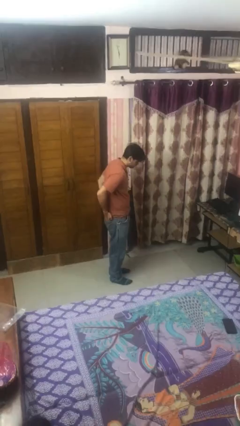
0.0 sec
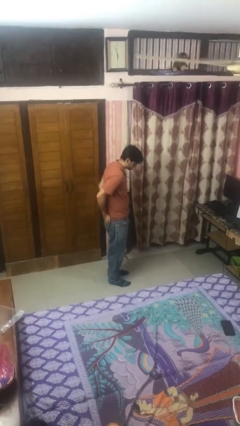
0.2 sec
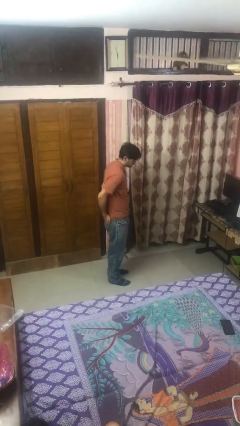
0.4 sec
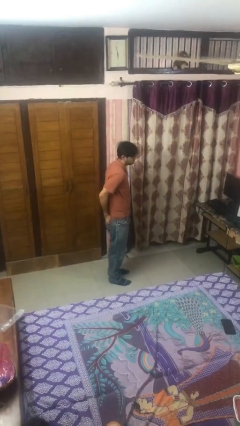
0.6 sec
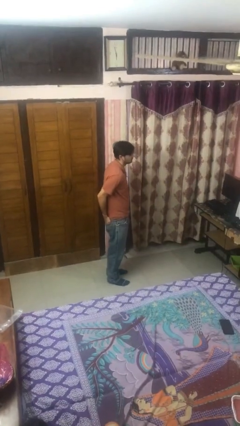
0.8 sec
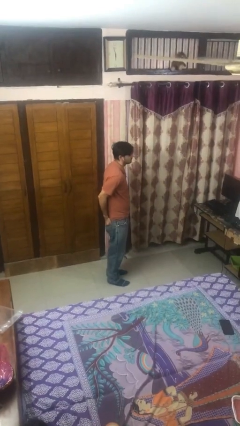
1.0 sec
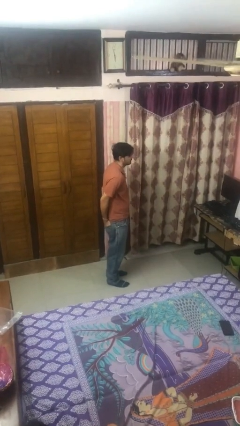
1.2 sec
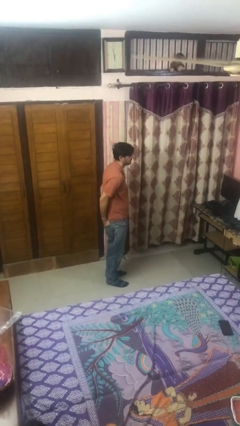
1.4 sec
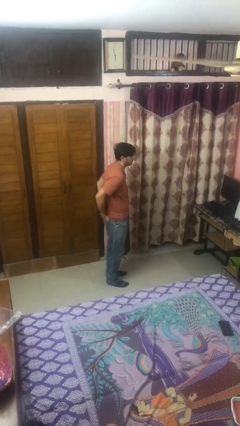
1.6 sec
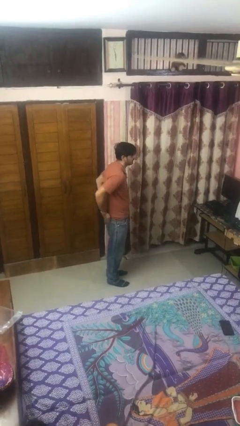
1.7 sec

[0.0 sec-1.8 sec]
person puts hands in back pockets

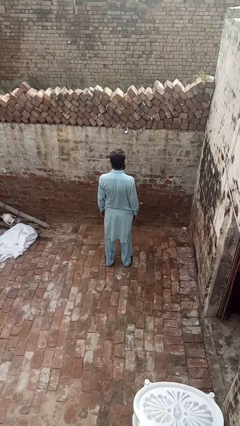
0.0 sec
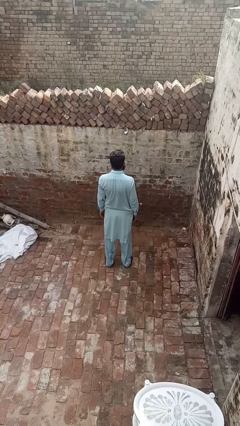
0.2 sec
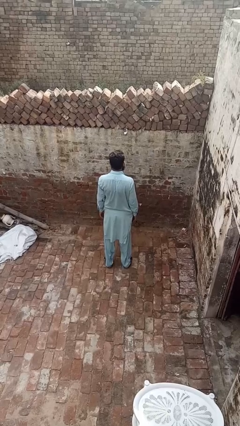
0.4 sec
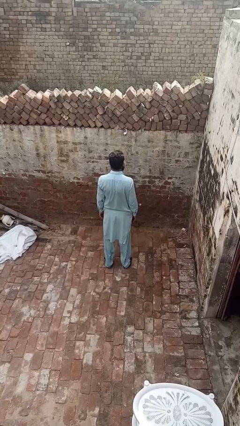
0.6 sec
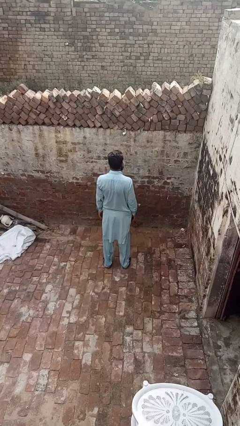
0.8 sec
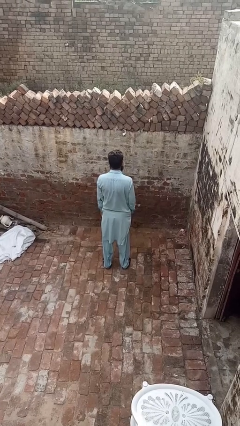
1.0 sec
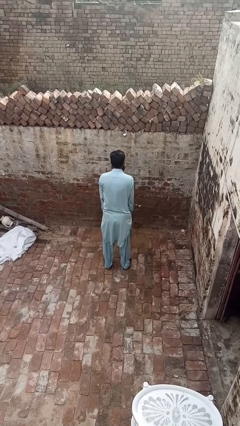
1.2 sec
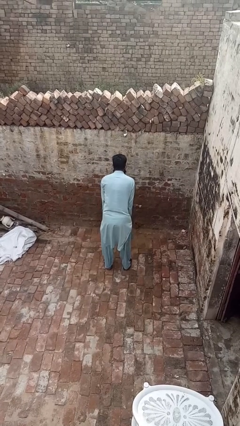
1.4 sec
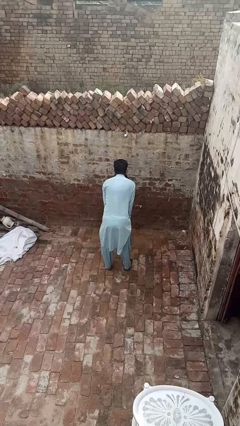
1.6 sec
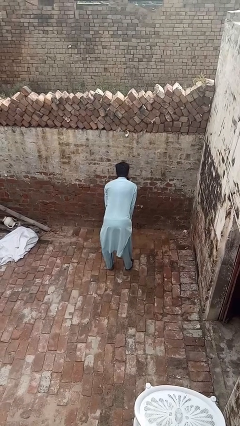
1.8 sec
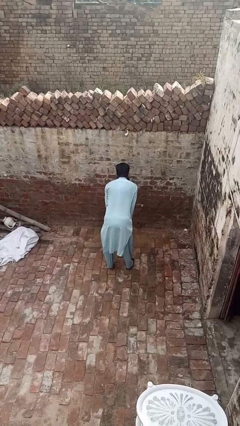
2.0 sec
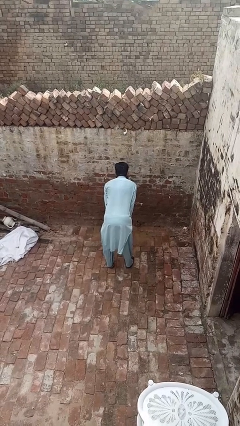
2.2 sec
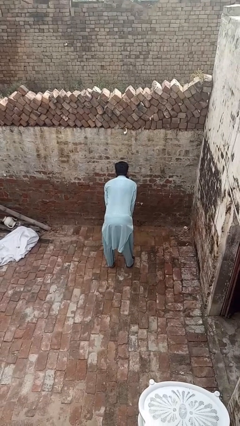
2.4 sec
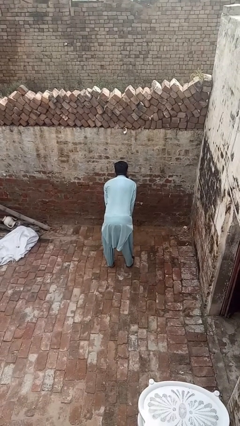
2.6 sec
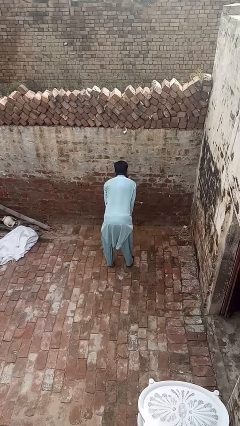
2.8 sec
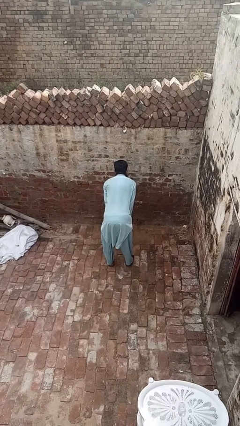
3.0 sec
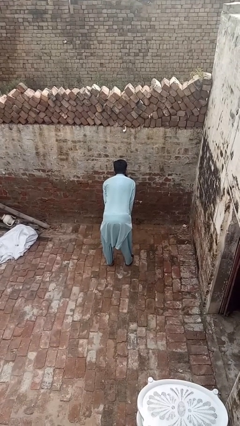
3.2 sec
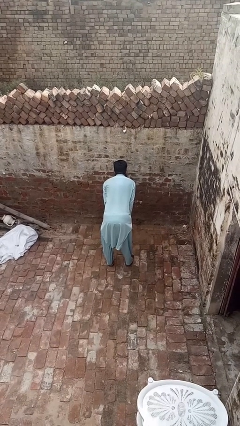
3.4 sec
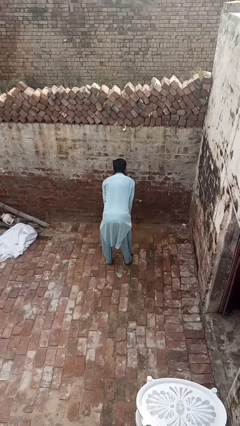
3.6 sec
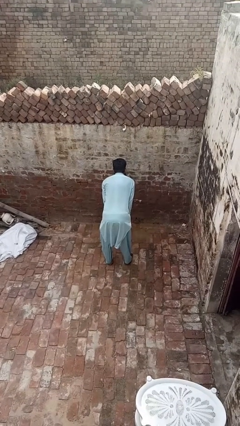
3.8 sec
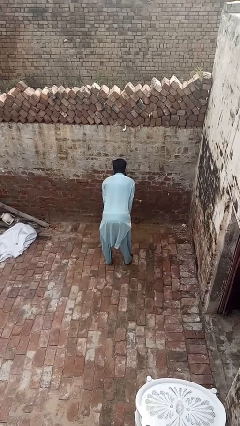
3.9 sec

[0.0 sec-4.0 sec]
person slaps hands on thighs

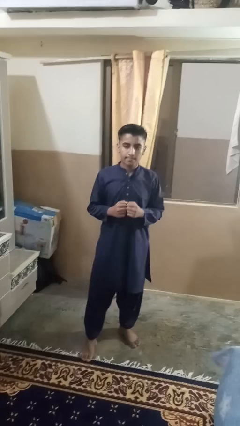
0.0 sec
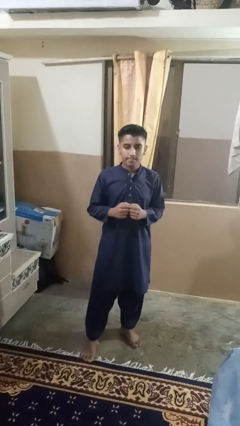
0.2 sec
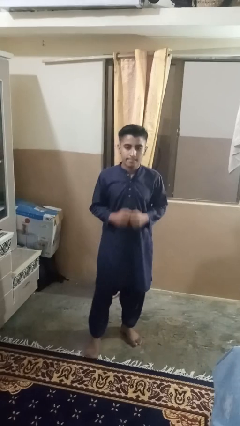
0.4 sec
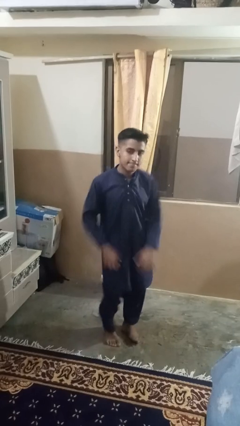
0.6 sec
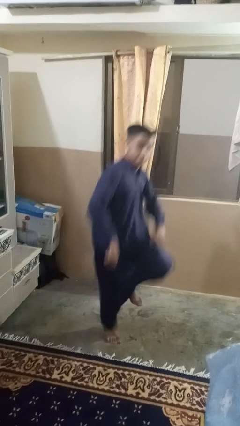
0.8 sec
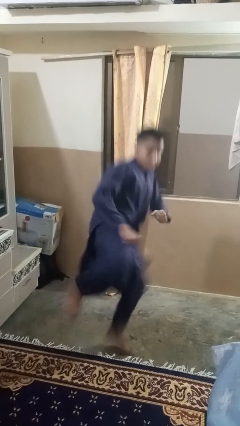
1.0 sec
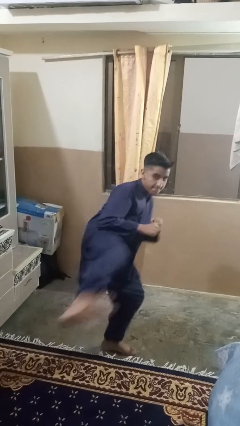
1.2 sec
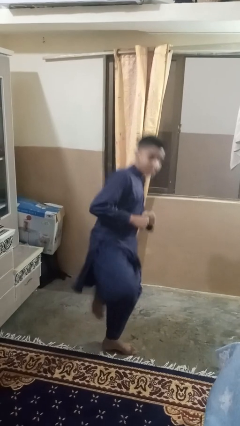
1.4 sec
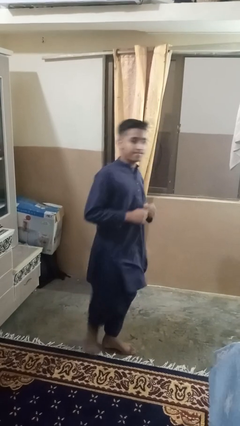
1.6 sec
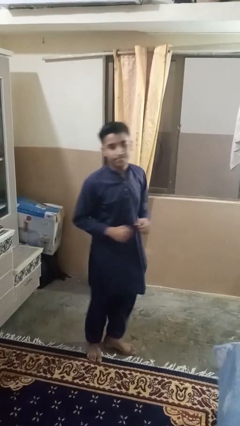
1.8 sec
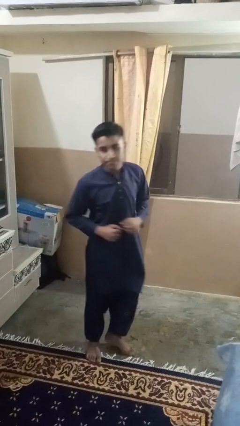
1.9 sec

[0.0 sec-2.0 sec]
person karate kicks

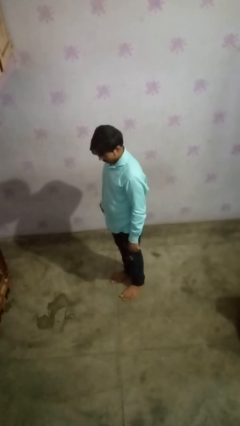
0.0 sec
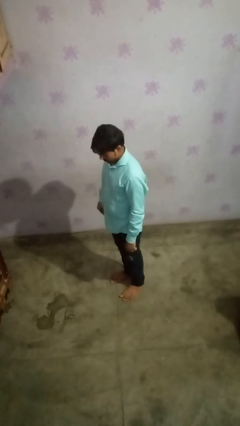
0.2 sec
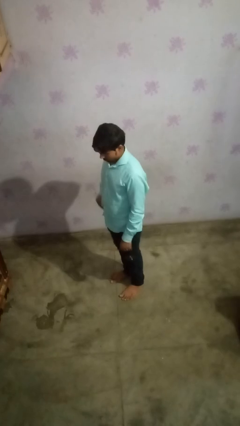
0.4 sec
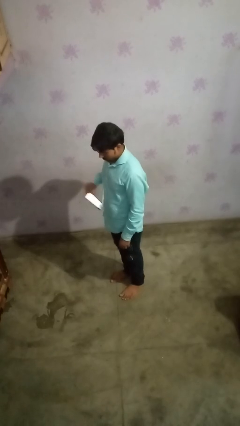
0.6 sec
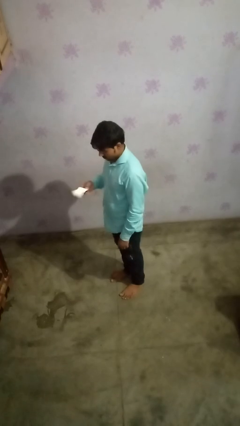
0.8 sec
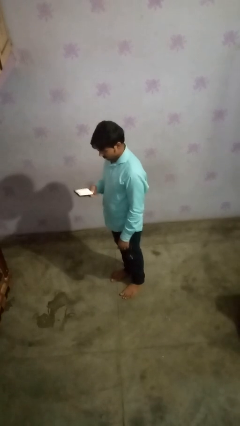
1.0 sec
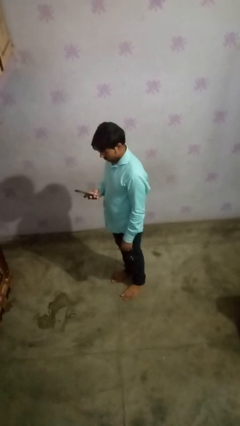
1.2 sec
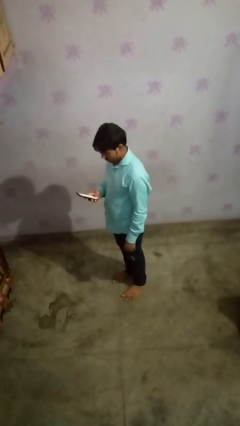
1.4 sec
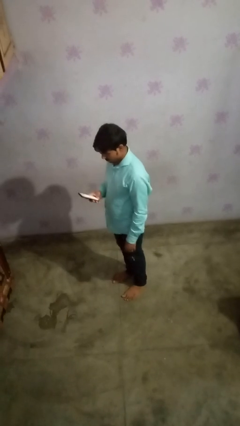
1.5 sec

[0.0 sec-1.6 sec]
person takes phone from pocket

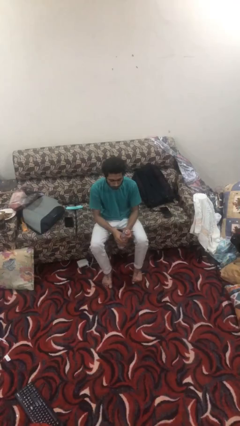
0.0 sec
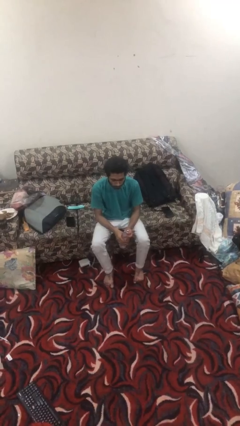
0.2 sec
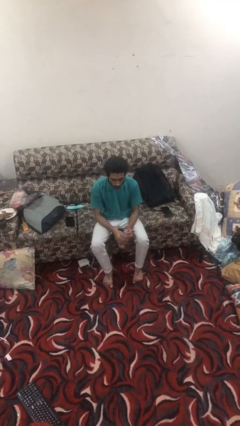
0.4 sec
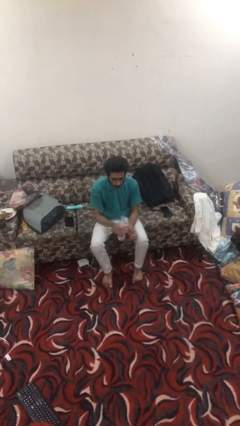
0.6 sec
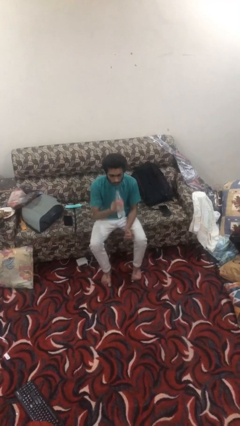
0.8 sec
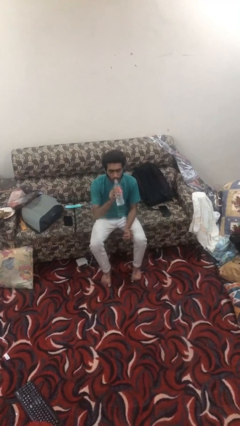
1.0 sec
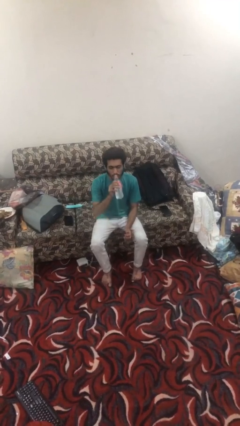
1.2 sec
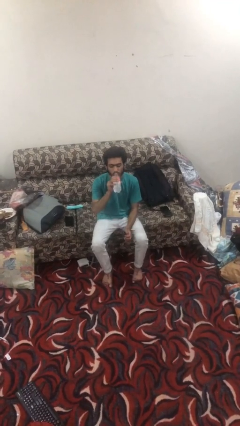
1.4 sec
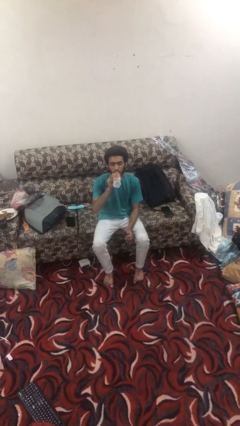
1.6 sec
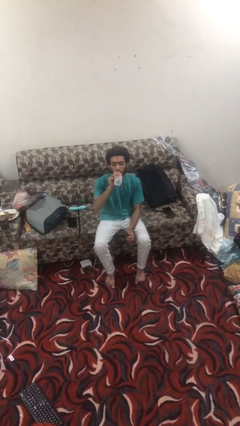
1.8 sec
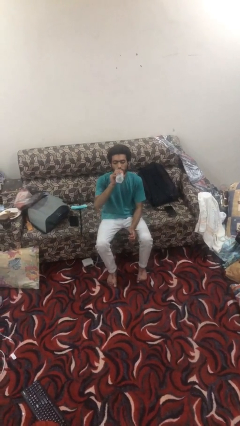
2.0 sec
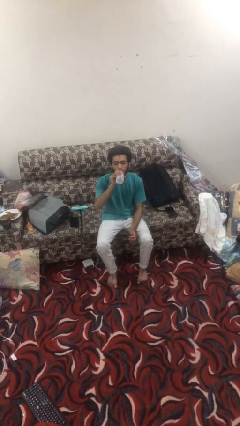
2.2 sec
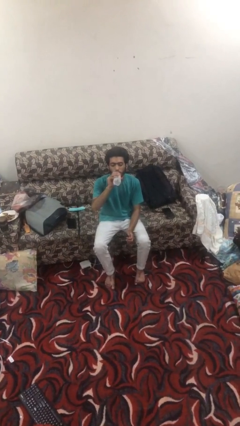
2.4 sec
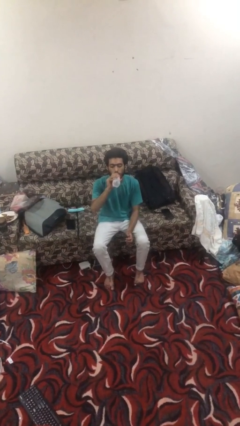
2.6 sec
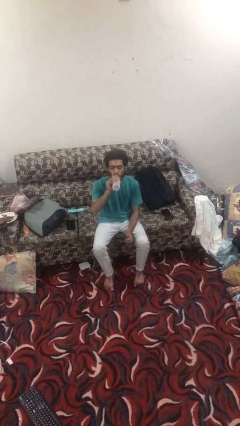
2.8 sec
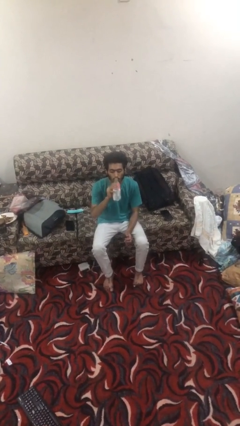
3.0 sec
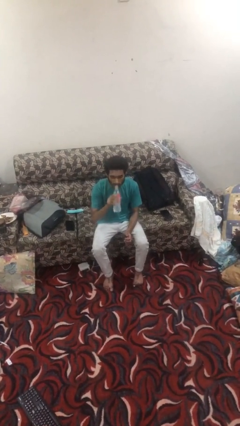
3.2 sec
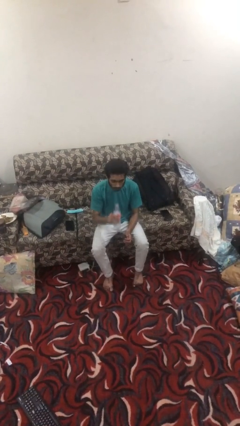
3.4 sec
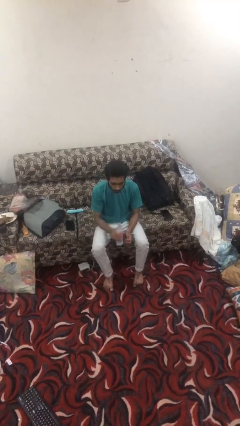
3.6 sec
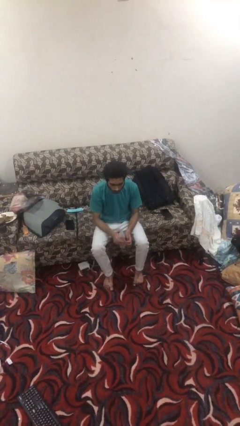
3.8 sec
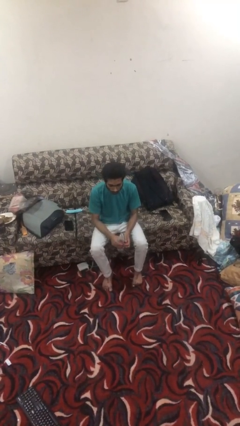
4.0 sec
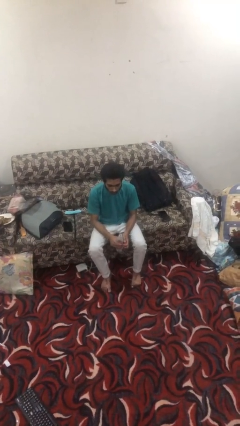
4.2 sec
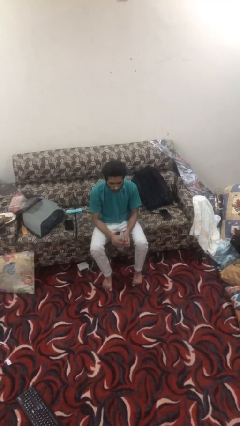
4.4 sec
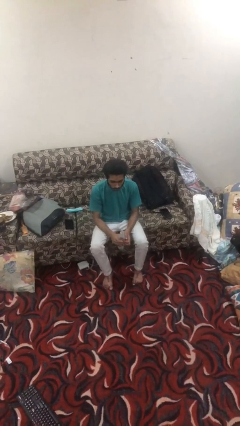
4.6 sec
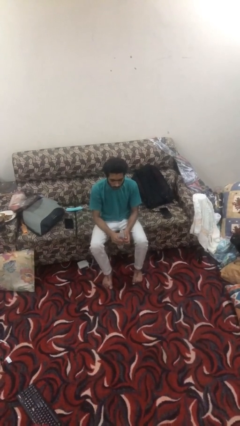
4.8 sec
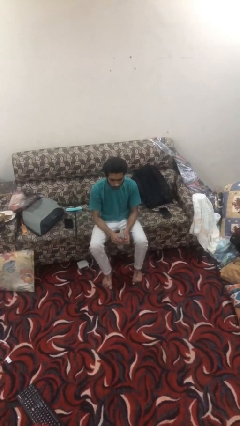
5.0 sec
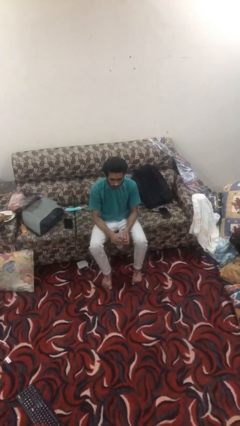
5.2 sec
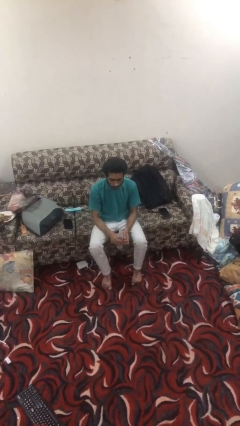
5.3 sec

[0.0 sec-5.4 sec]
person drinks from bottle

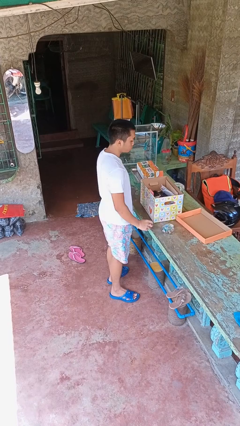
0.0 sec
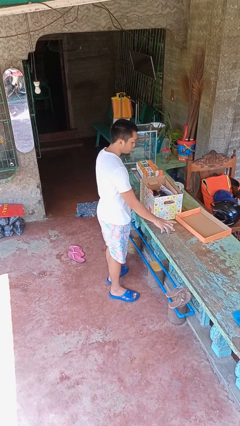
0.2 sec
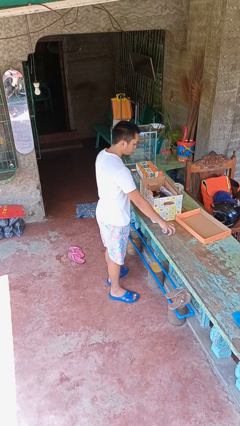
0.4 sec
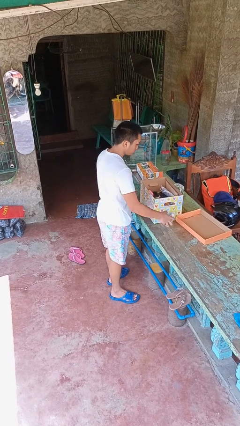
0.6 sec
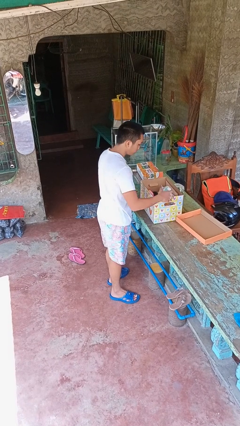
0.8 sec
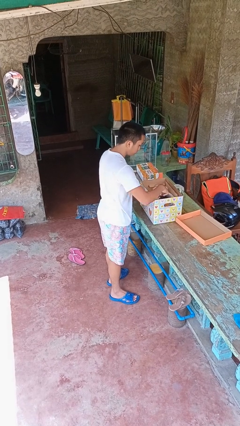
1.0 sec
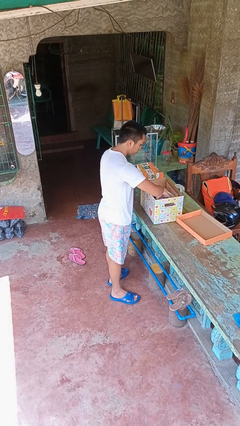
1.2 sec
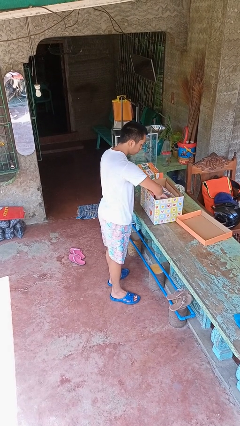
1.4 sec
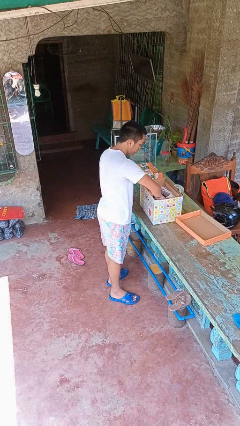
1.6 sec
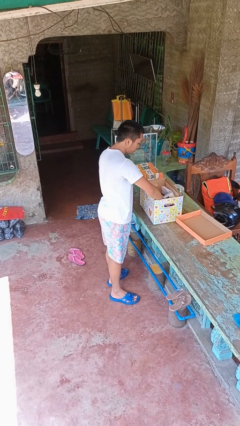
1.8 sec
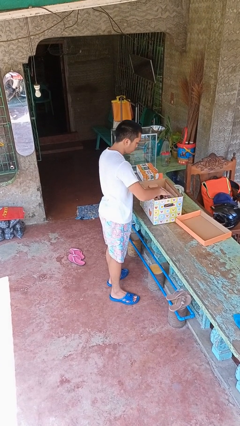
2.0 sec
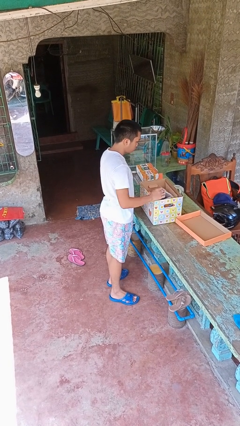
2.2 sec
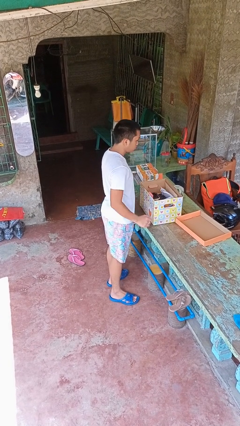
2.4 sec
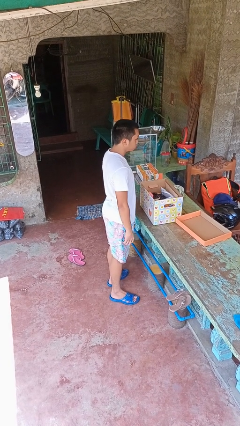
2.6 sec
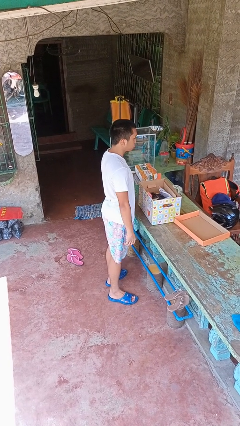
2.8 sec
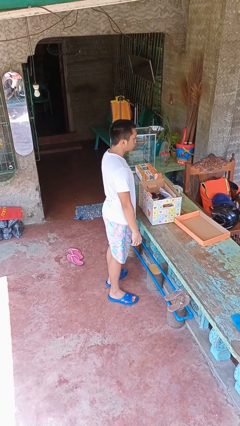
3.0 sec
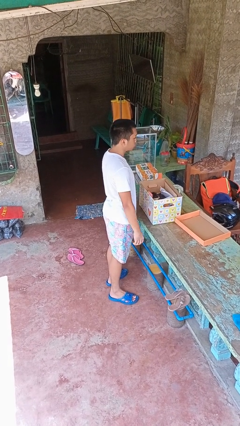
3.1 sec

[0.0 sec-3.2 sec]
person puts object into box
